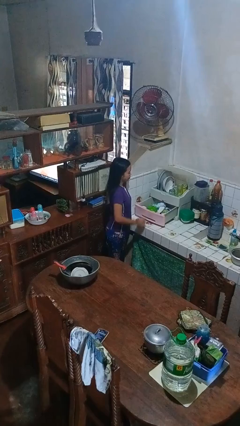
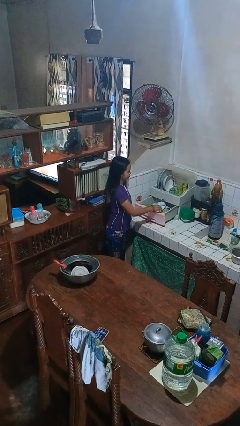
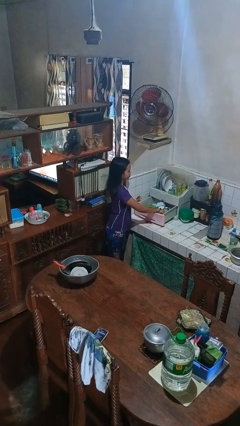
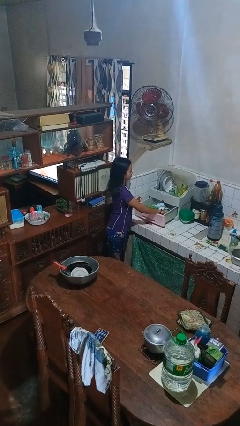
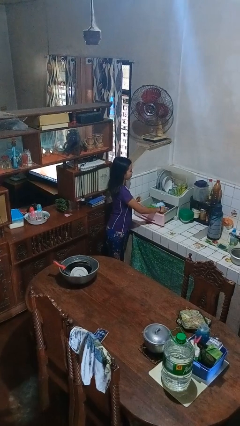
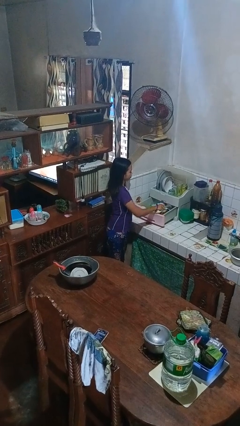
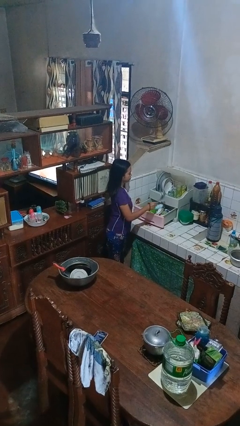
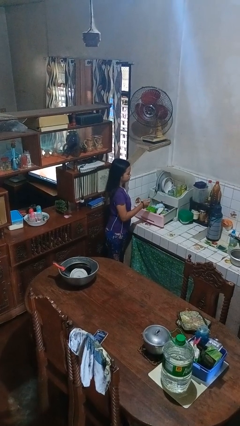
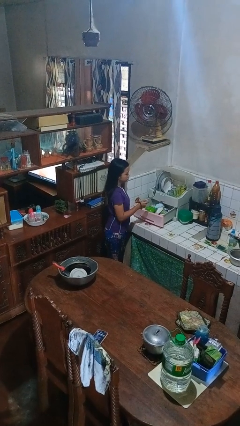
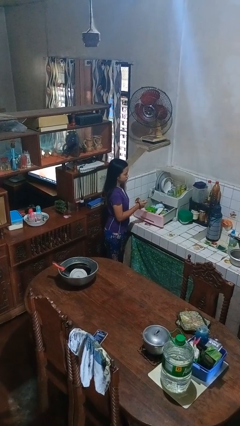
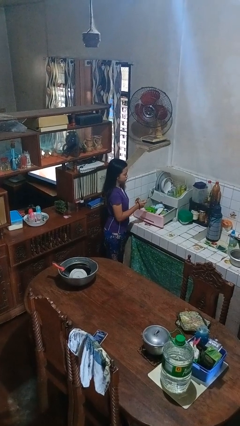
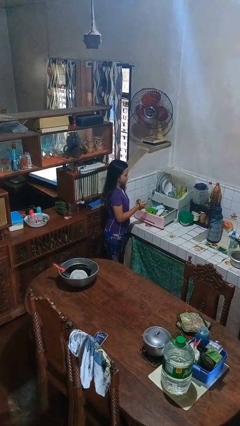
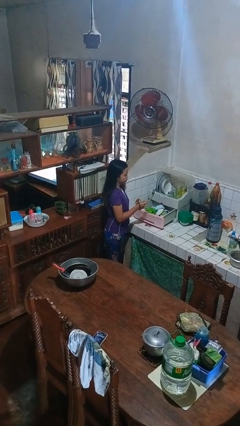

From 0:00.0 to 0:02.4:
person takes object from kitchen drawer

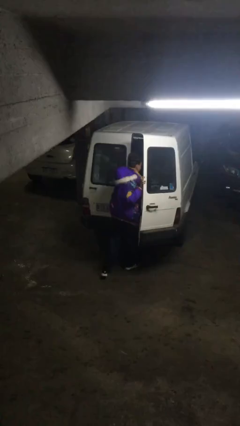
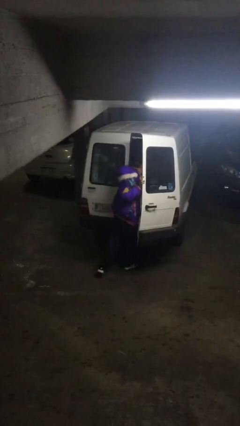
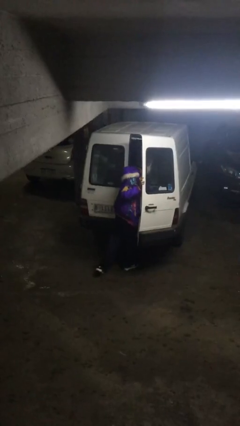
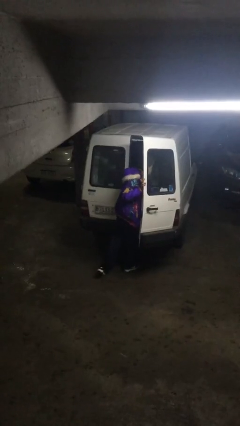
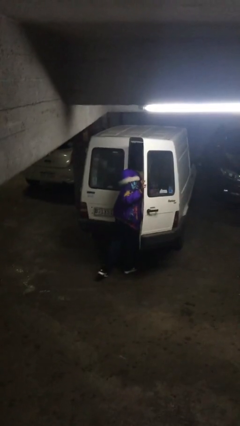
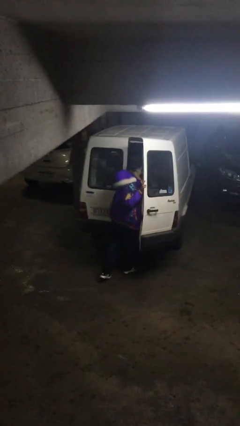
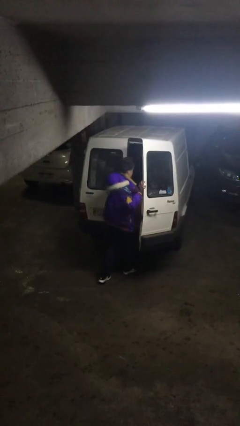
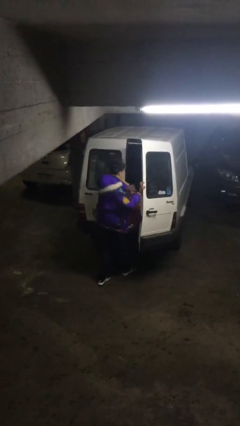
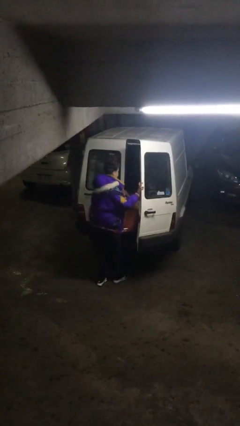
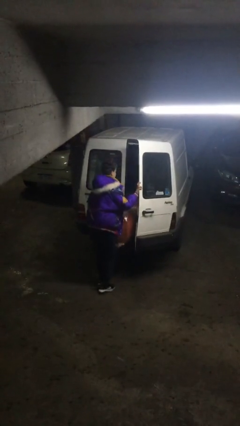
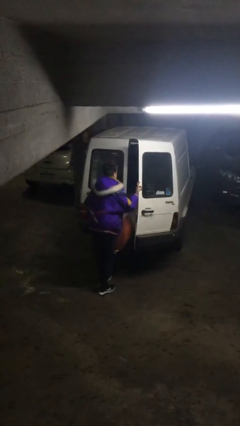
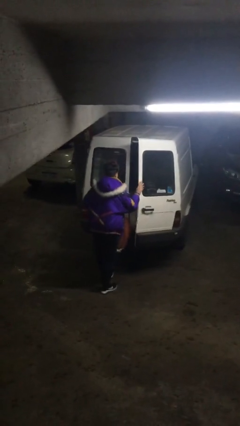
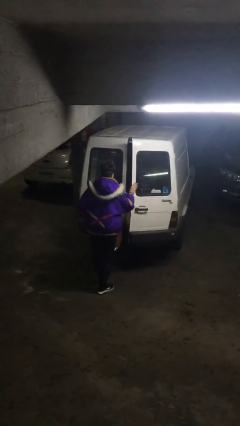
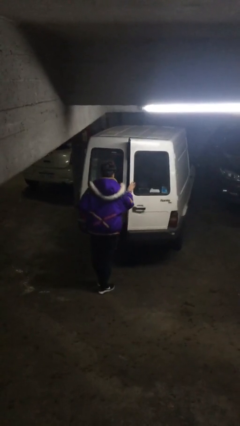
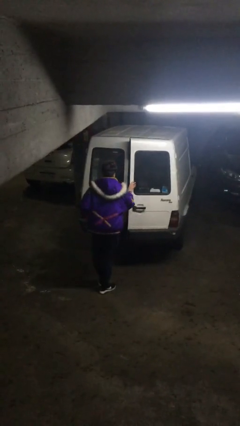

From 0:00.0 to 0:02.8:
person unloads car

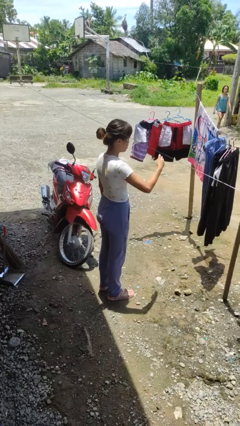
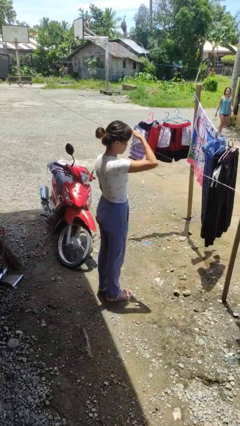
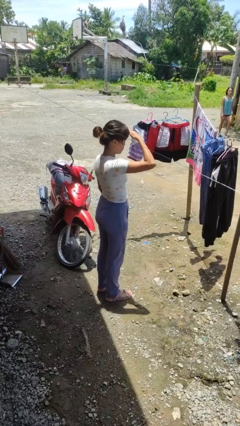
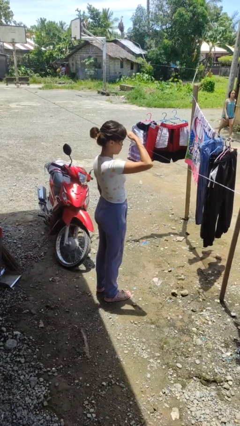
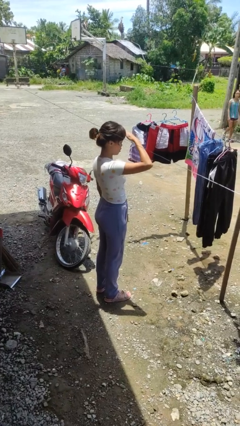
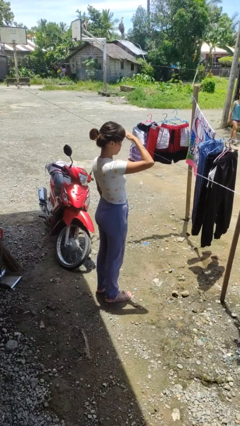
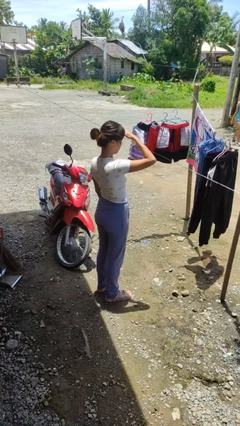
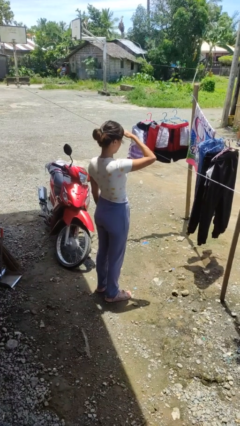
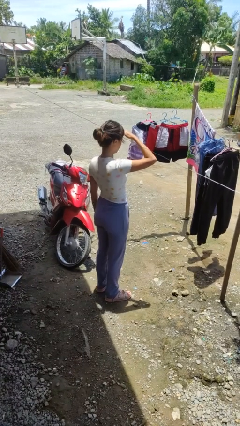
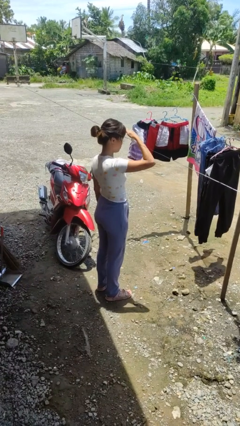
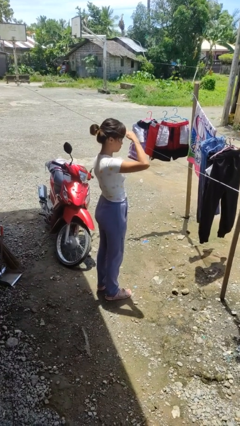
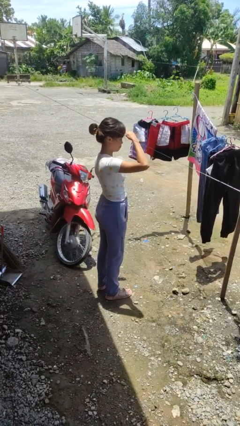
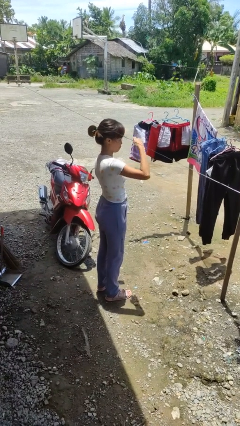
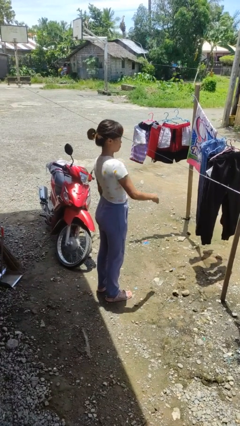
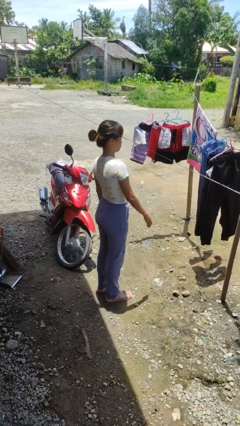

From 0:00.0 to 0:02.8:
person shades eyes

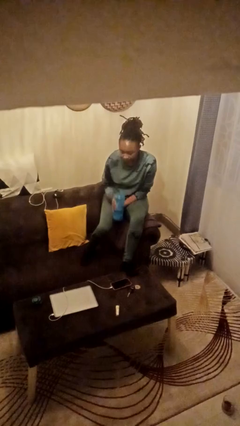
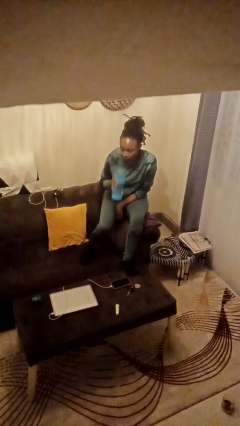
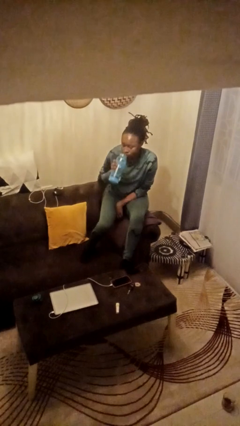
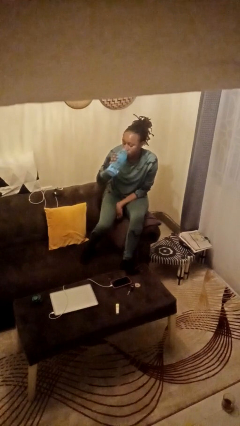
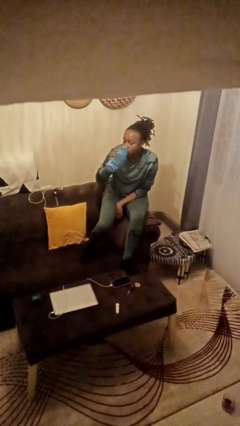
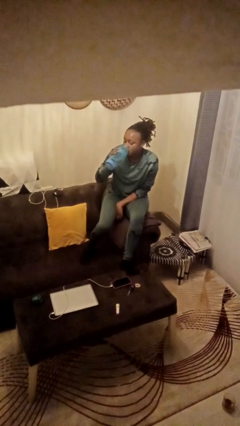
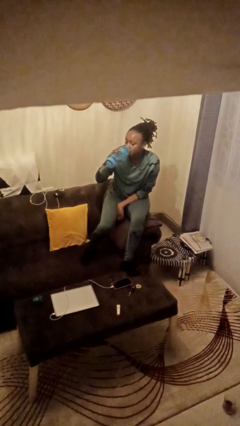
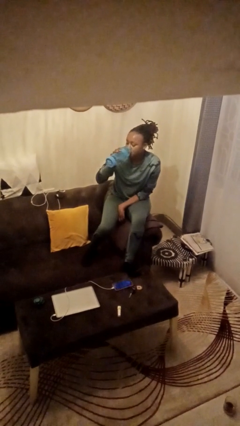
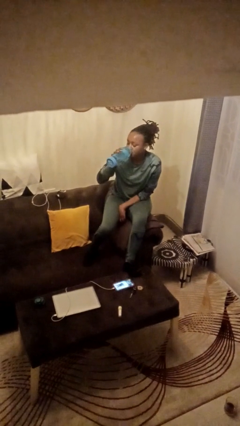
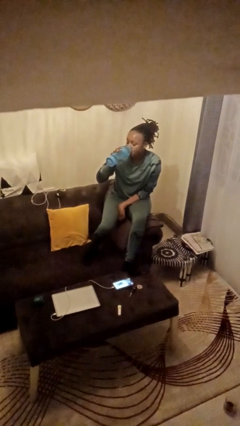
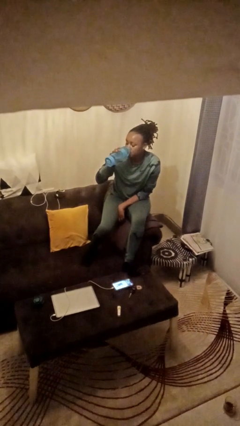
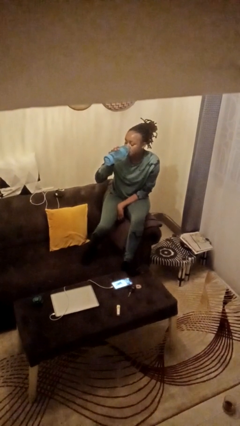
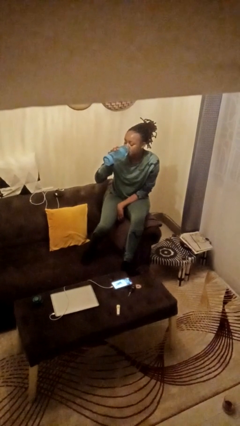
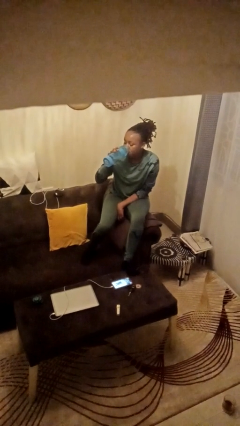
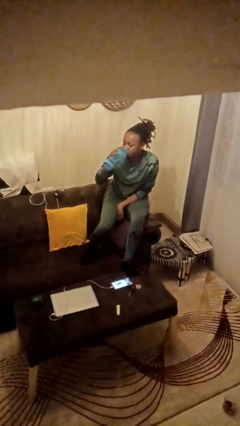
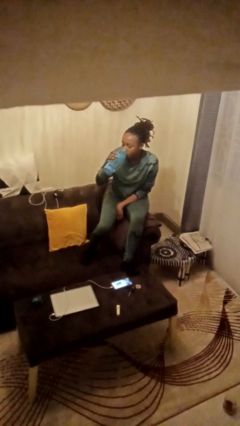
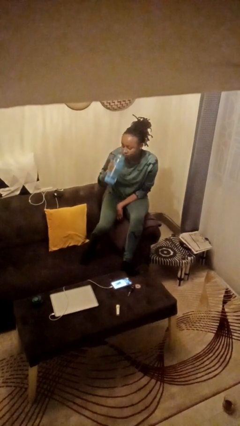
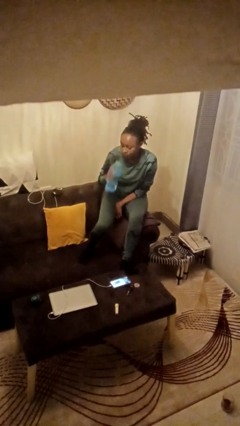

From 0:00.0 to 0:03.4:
person drinks from bottle

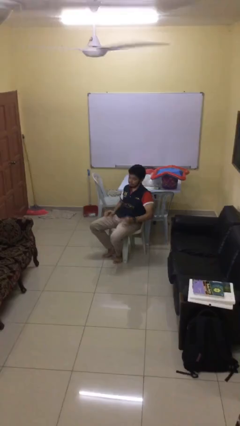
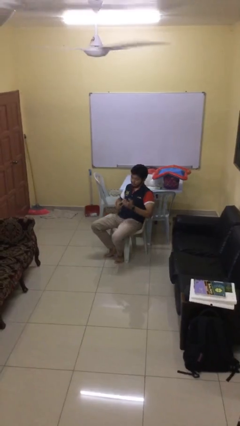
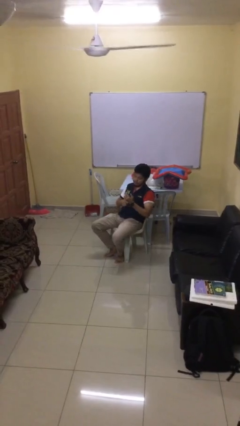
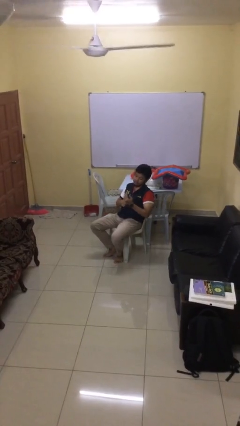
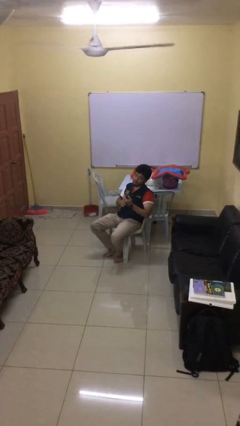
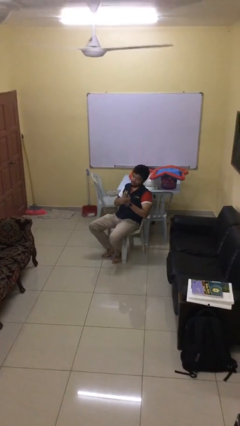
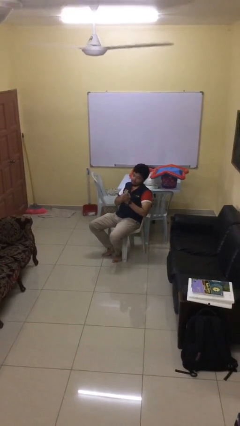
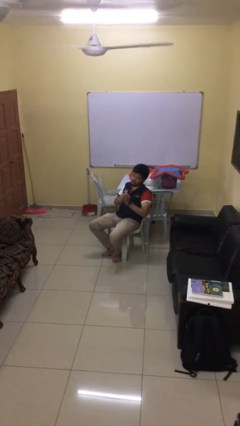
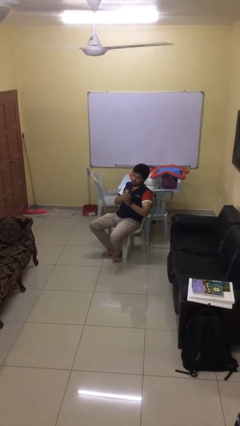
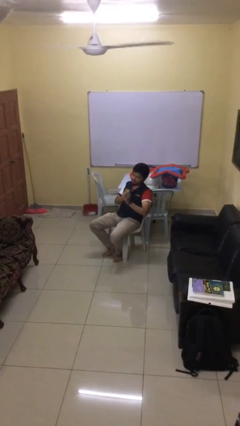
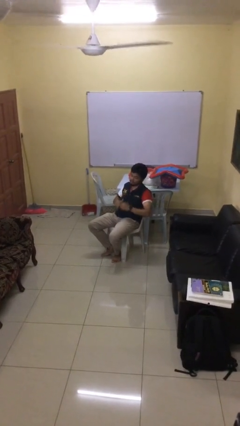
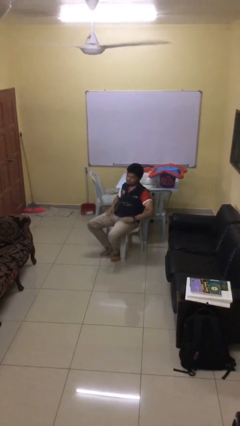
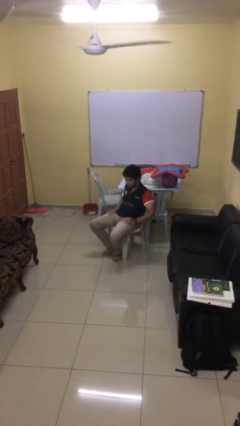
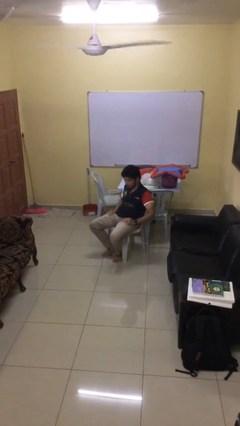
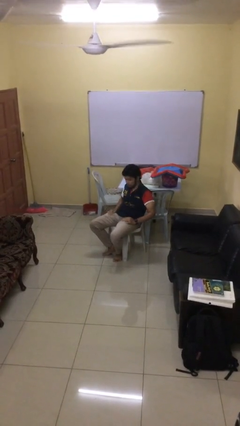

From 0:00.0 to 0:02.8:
person cracks knuckles

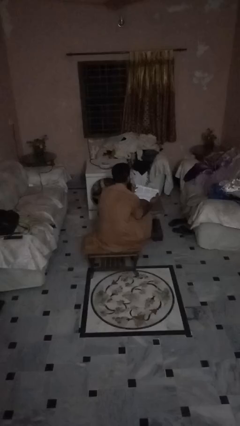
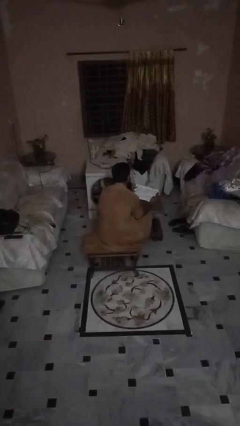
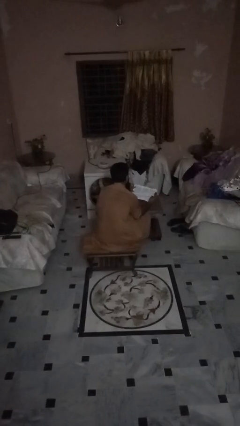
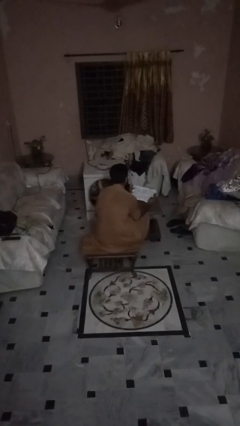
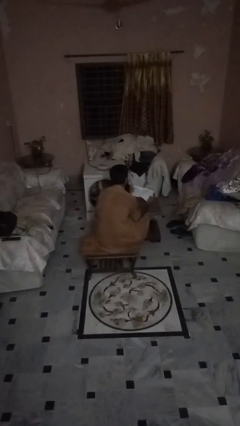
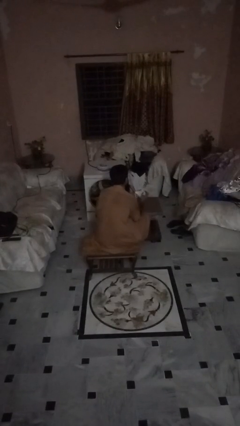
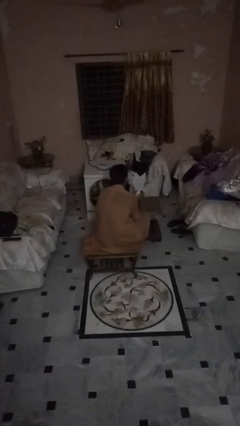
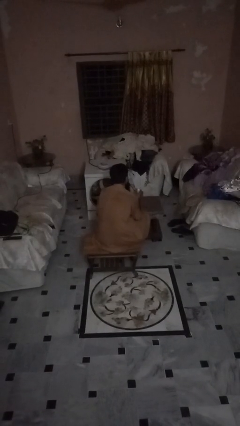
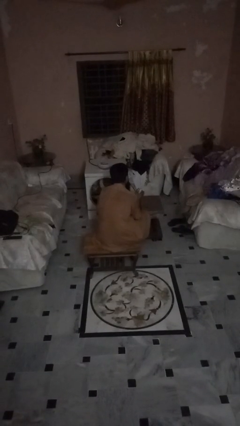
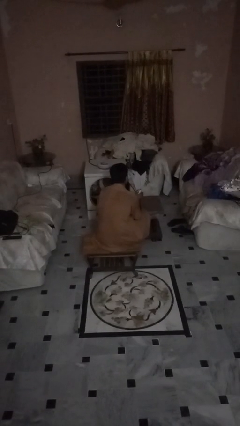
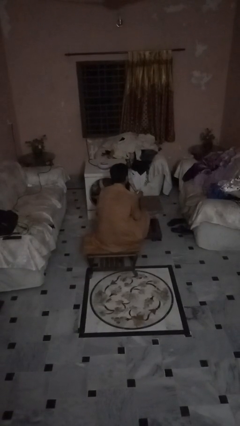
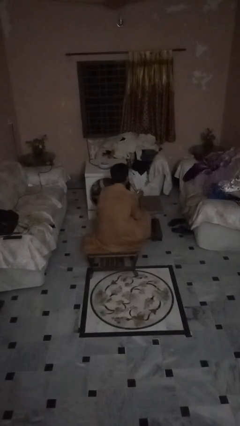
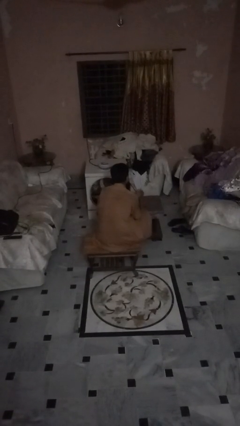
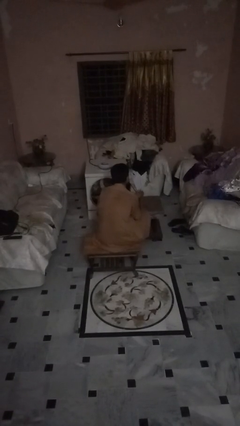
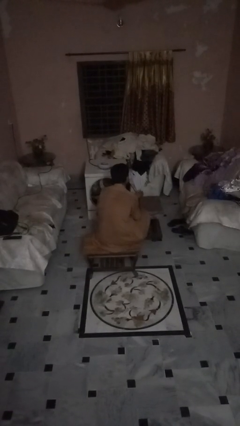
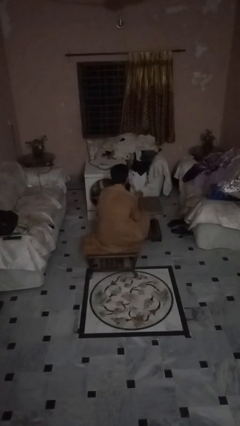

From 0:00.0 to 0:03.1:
person crumples paper
